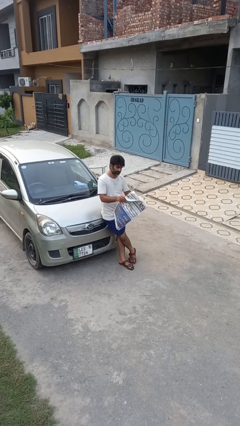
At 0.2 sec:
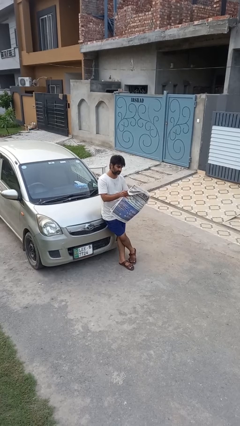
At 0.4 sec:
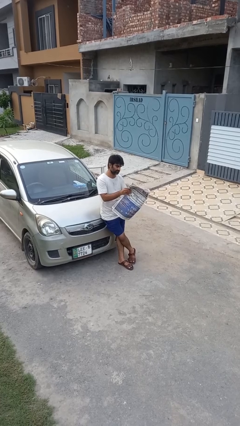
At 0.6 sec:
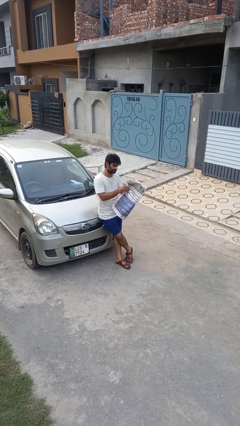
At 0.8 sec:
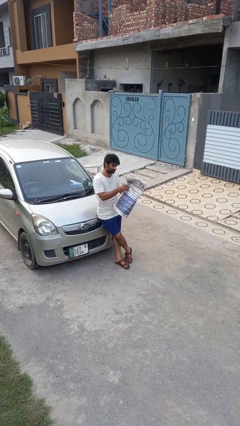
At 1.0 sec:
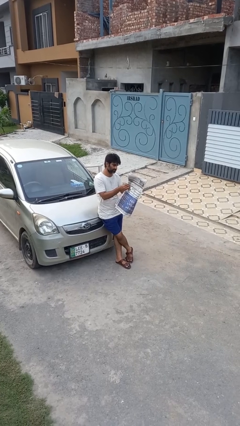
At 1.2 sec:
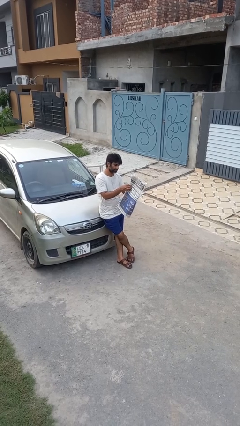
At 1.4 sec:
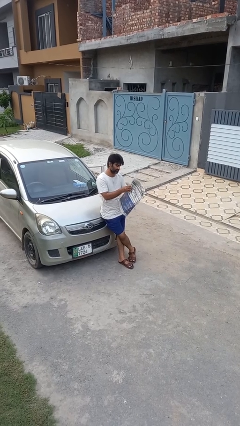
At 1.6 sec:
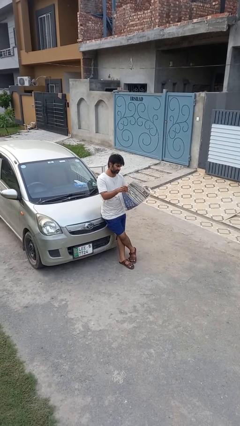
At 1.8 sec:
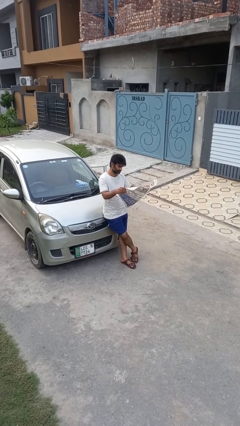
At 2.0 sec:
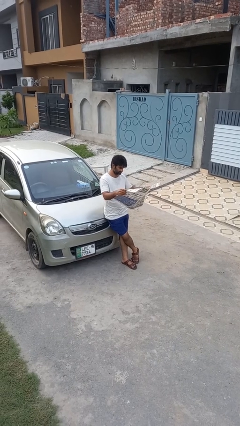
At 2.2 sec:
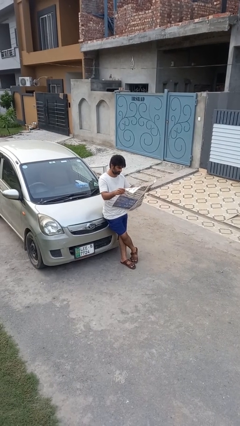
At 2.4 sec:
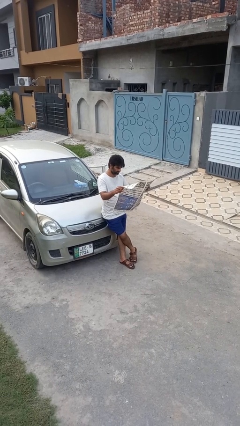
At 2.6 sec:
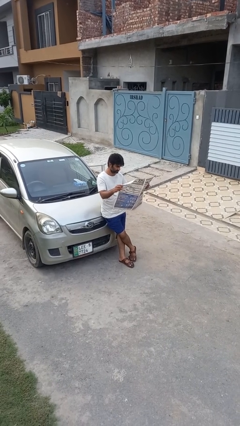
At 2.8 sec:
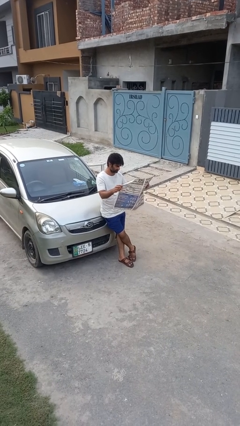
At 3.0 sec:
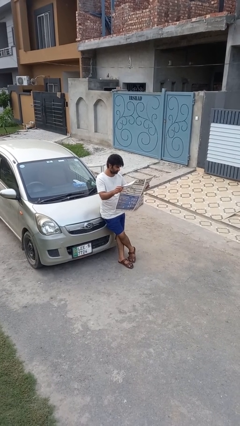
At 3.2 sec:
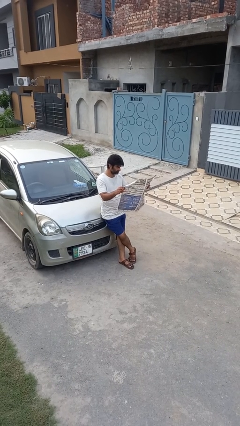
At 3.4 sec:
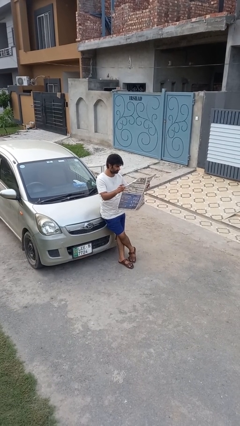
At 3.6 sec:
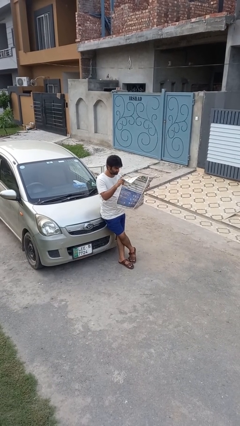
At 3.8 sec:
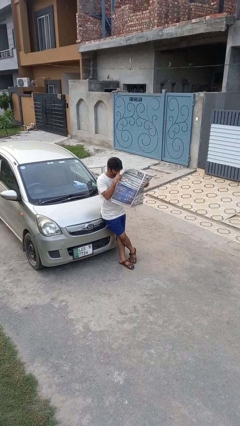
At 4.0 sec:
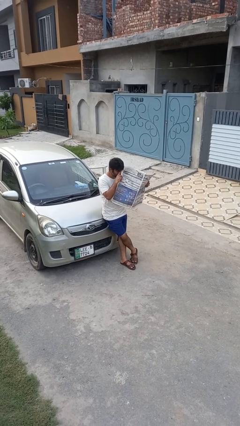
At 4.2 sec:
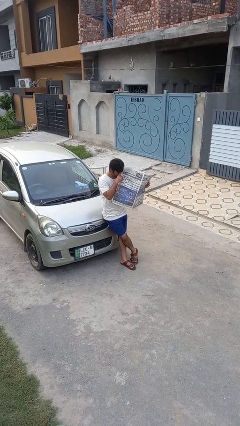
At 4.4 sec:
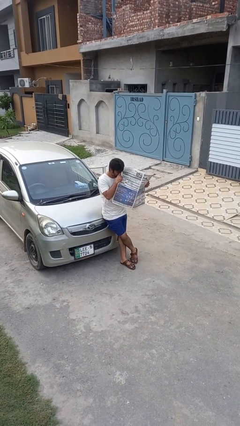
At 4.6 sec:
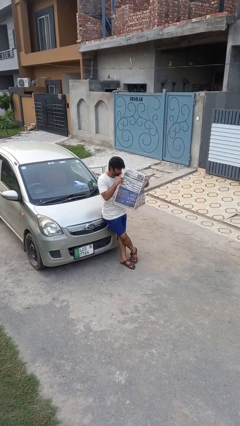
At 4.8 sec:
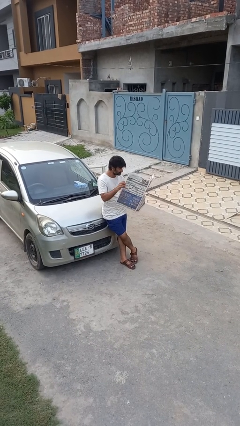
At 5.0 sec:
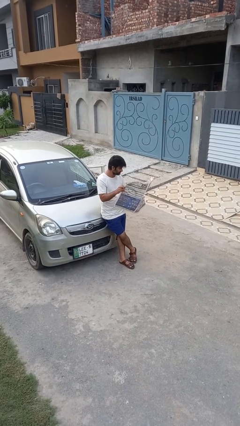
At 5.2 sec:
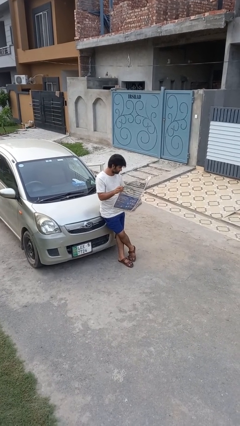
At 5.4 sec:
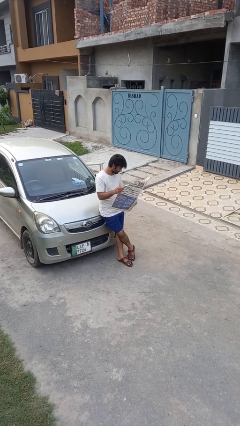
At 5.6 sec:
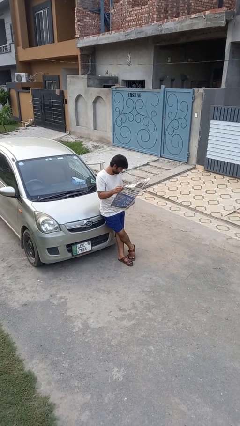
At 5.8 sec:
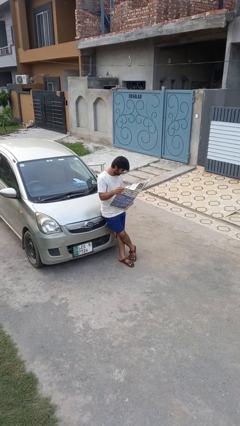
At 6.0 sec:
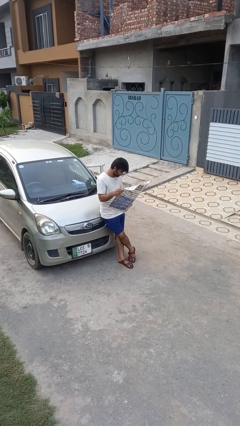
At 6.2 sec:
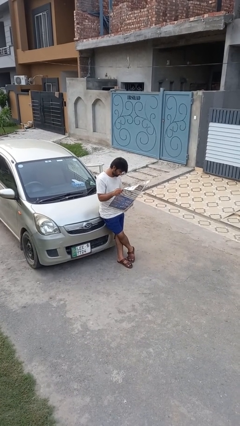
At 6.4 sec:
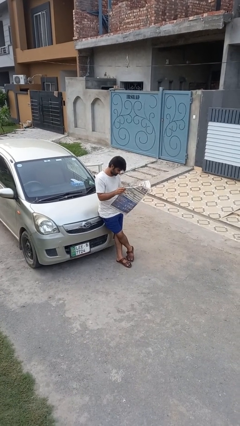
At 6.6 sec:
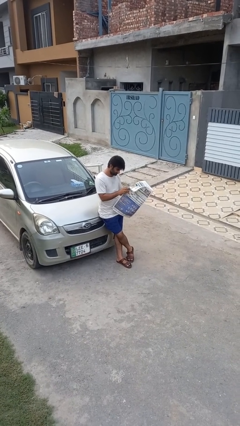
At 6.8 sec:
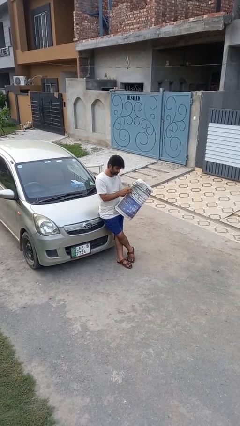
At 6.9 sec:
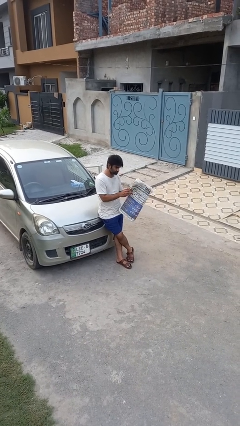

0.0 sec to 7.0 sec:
person reads newspaper

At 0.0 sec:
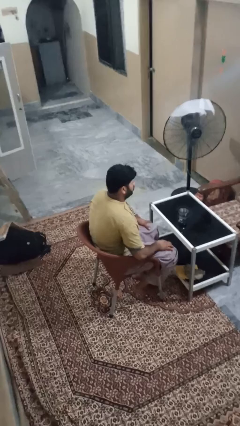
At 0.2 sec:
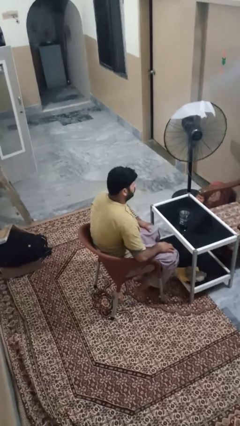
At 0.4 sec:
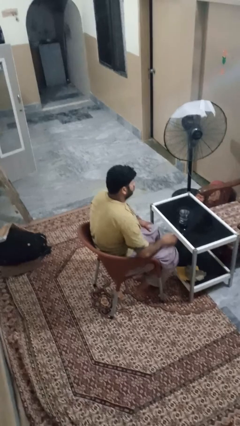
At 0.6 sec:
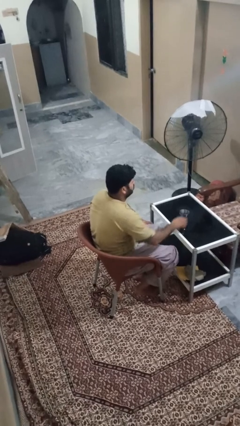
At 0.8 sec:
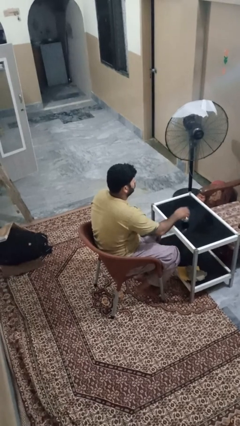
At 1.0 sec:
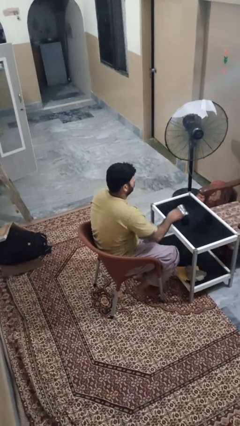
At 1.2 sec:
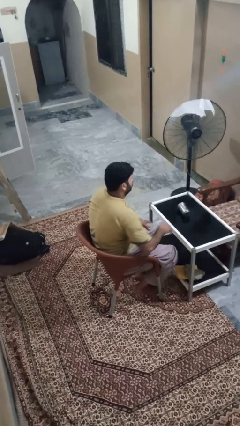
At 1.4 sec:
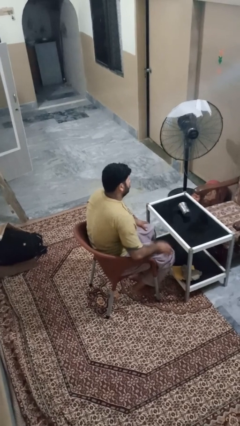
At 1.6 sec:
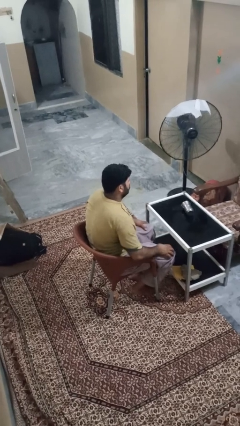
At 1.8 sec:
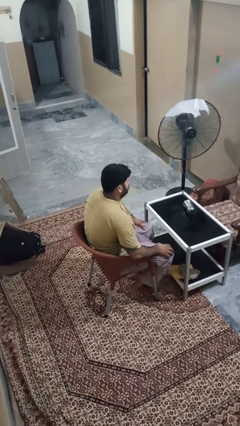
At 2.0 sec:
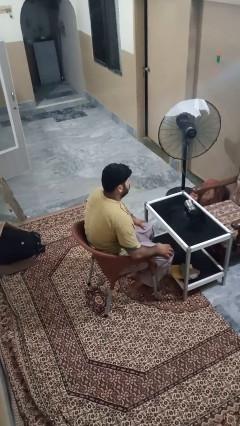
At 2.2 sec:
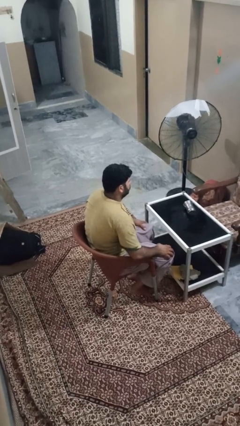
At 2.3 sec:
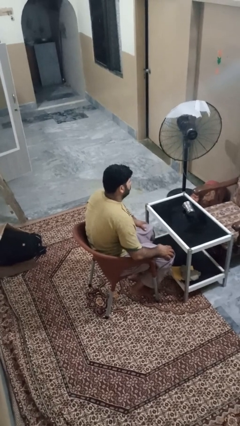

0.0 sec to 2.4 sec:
person knocks over glass

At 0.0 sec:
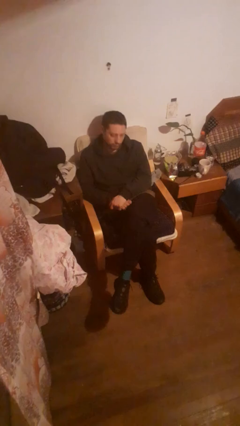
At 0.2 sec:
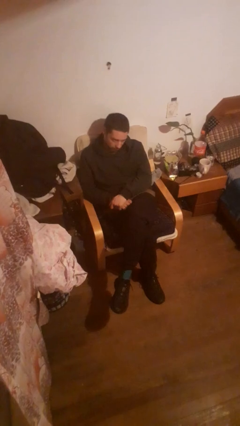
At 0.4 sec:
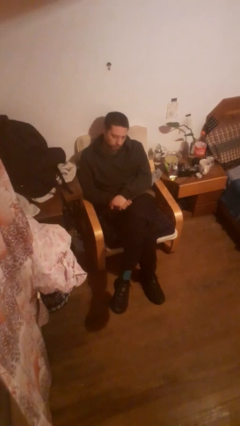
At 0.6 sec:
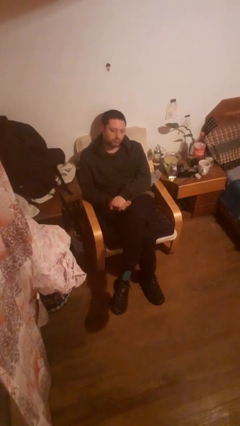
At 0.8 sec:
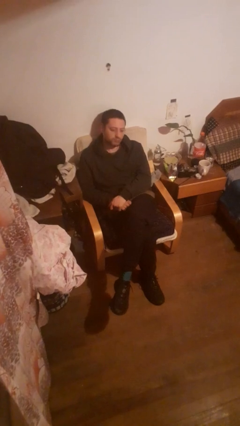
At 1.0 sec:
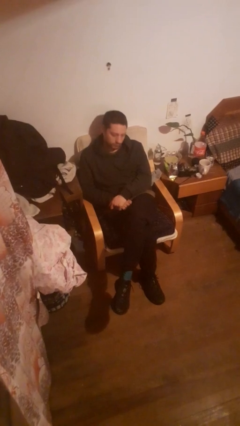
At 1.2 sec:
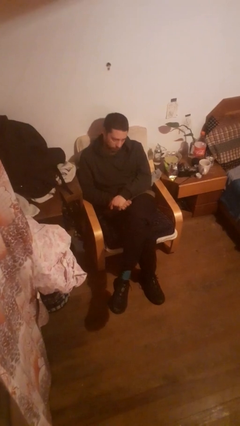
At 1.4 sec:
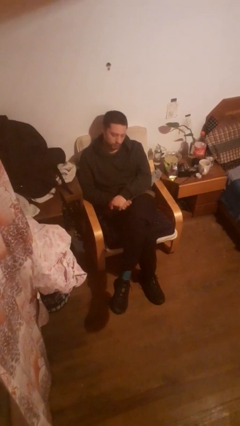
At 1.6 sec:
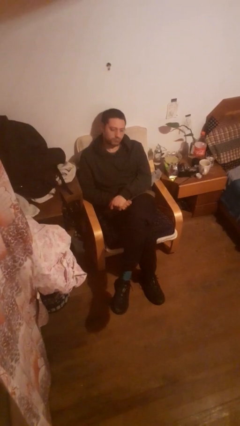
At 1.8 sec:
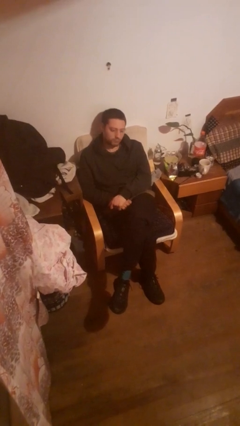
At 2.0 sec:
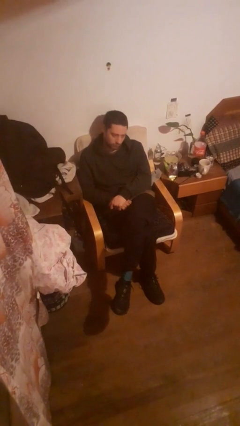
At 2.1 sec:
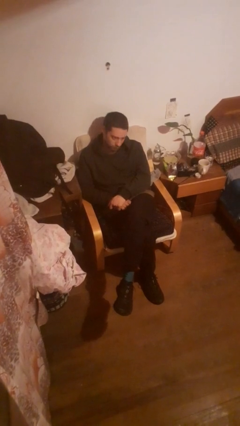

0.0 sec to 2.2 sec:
person nods head

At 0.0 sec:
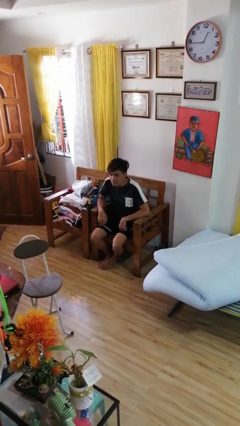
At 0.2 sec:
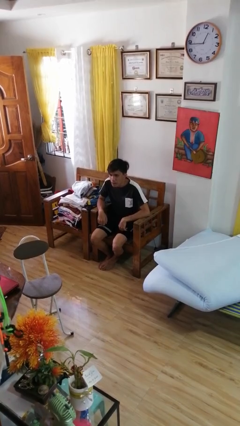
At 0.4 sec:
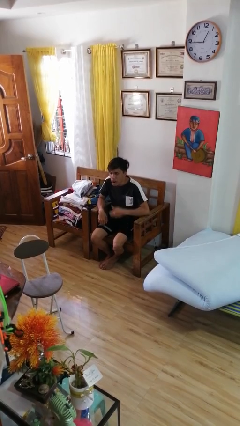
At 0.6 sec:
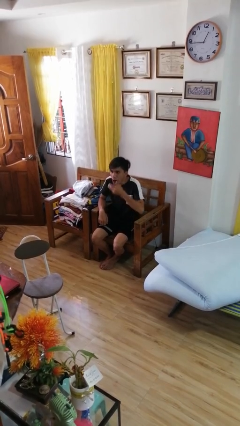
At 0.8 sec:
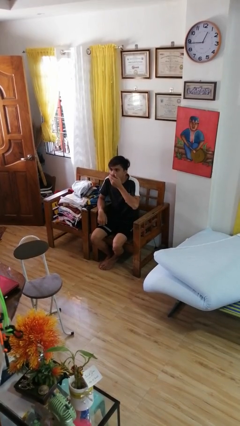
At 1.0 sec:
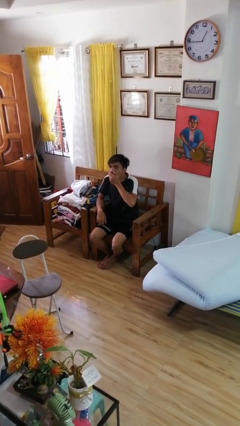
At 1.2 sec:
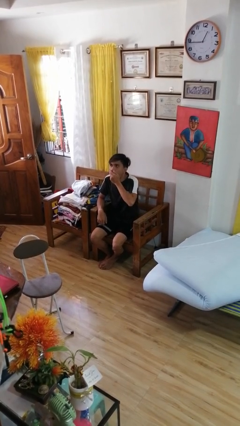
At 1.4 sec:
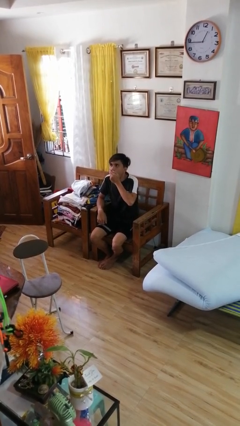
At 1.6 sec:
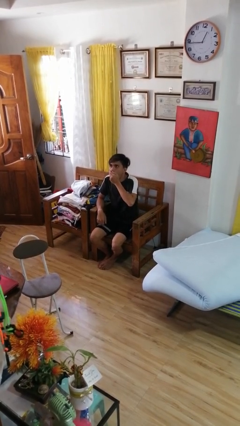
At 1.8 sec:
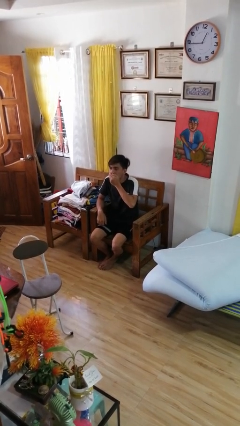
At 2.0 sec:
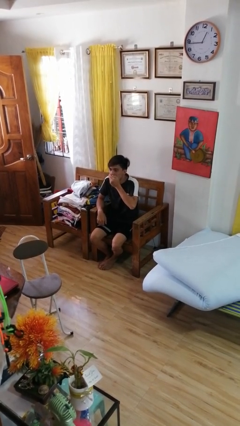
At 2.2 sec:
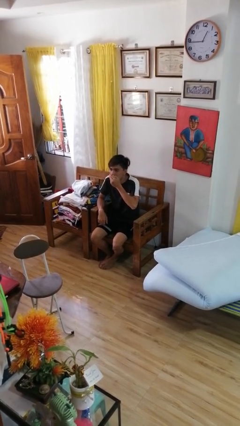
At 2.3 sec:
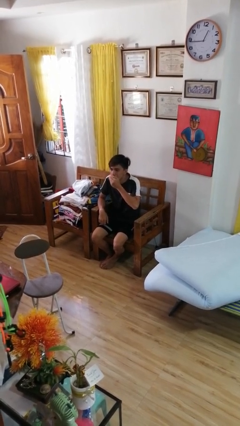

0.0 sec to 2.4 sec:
person yawns

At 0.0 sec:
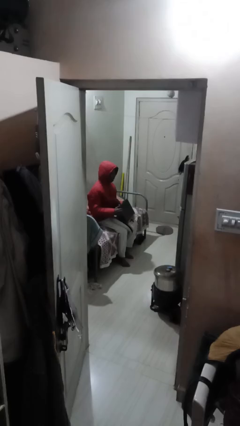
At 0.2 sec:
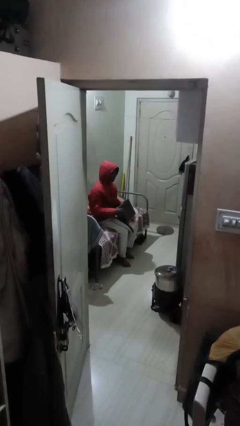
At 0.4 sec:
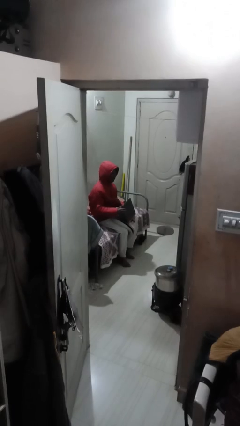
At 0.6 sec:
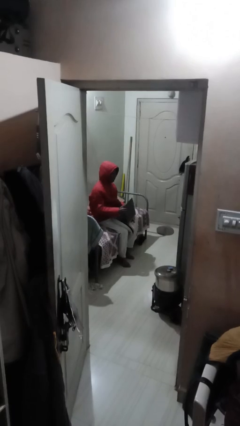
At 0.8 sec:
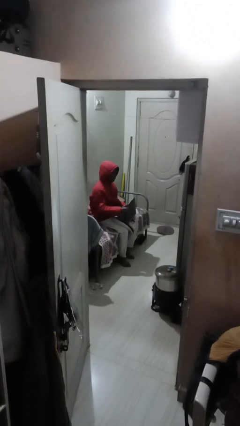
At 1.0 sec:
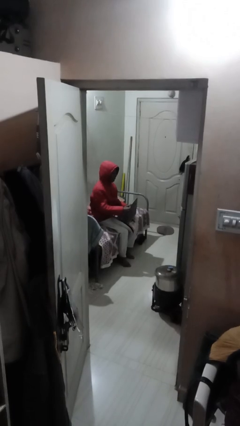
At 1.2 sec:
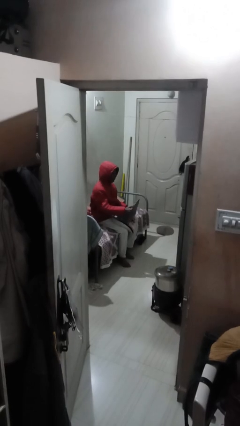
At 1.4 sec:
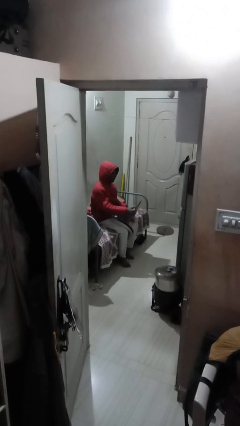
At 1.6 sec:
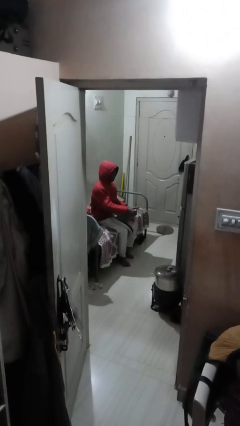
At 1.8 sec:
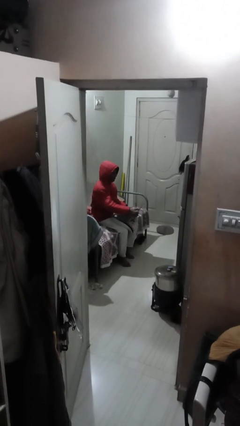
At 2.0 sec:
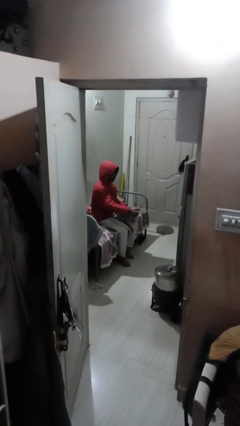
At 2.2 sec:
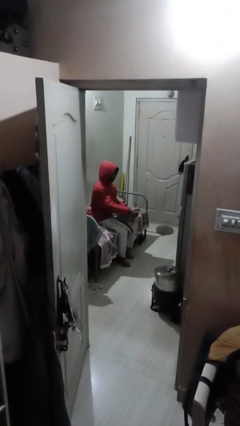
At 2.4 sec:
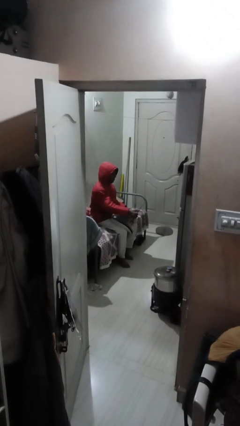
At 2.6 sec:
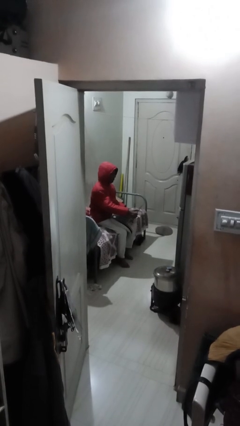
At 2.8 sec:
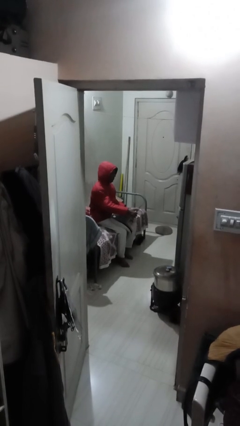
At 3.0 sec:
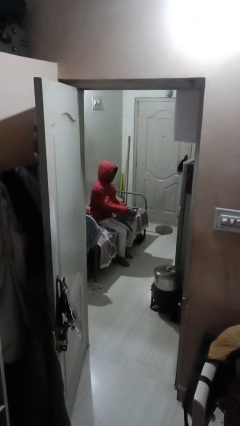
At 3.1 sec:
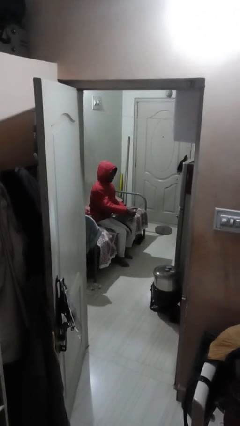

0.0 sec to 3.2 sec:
person interacts with laptop
